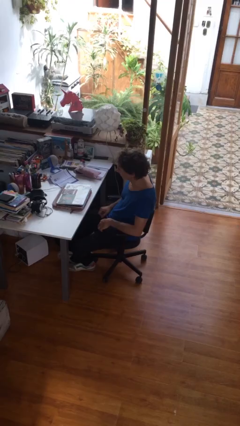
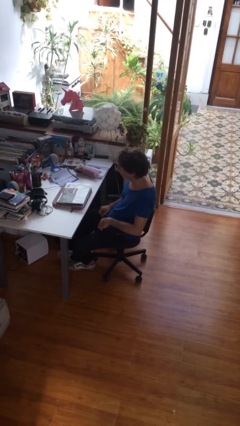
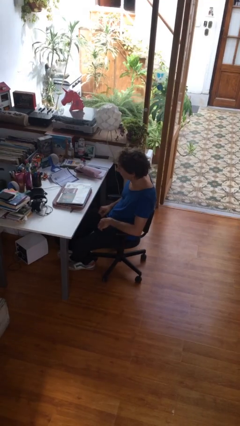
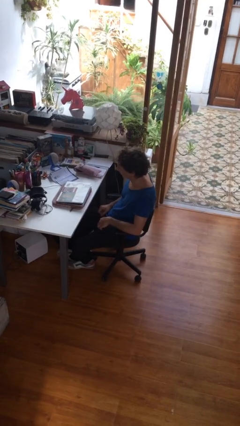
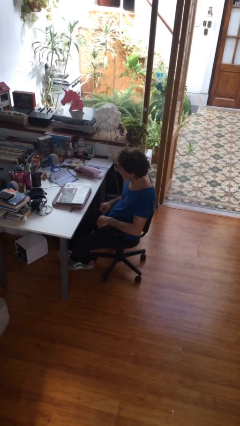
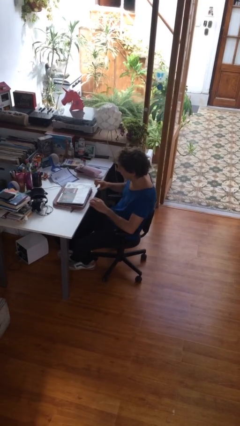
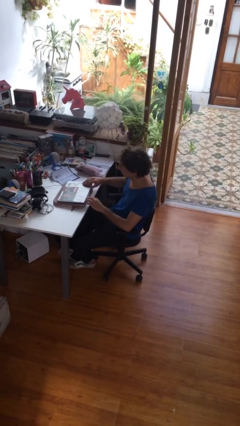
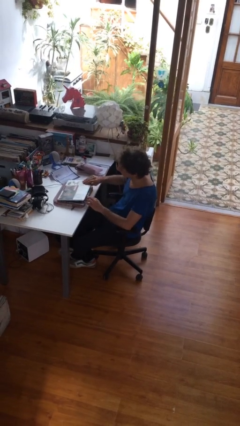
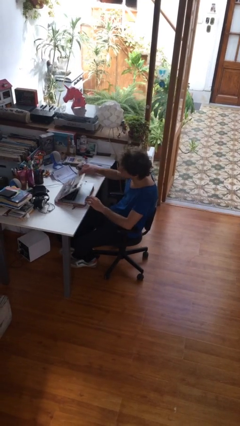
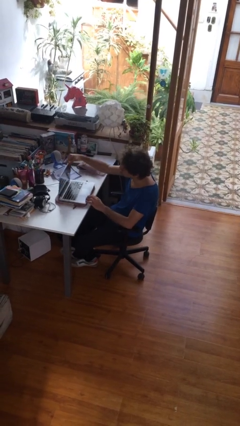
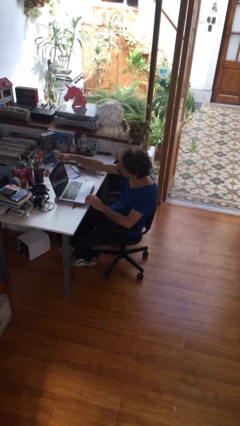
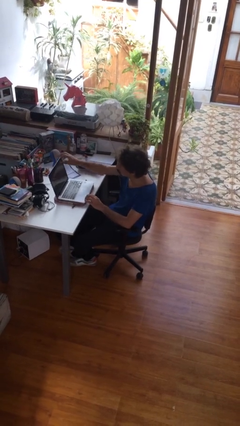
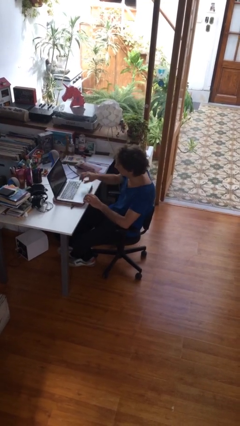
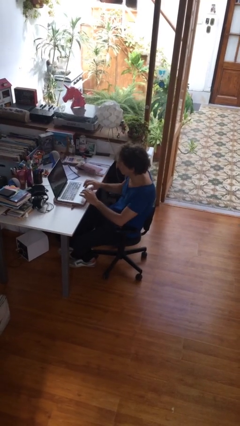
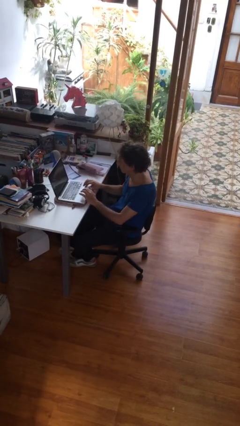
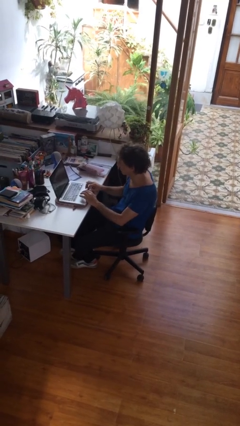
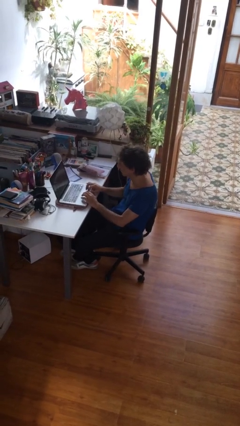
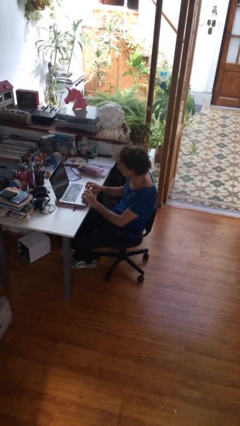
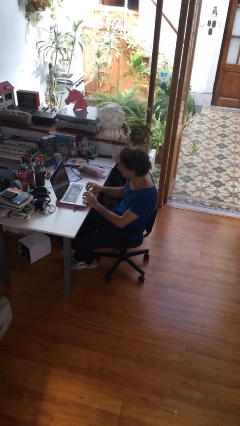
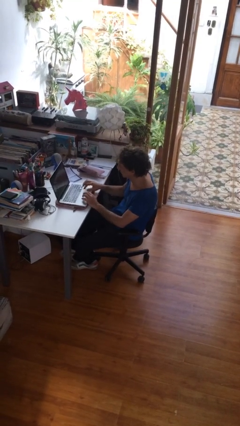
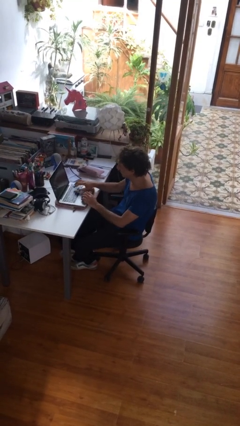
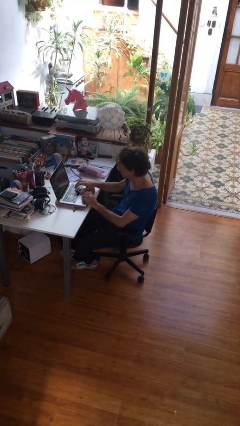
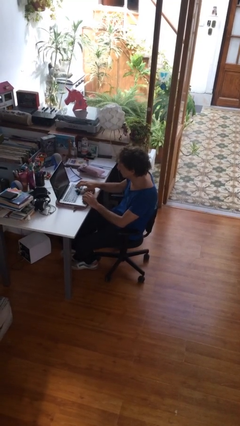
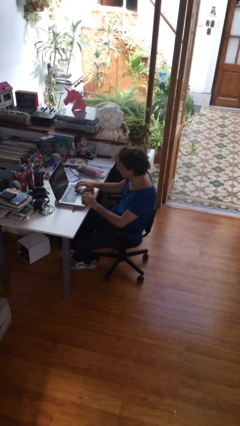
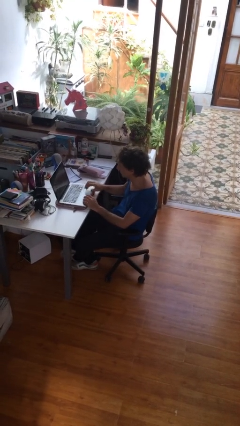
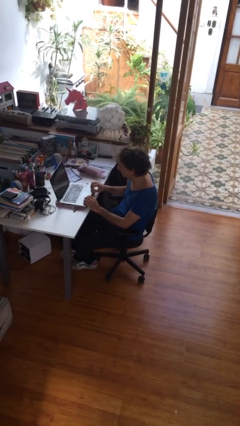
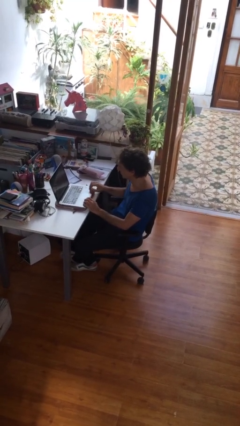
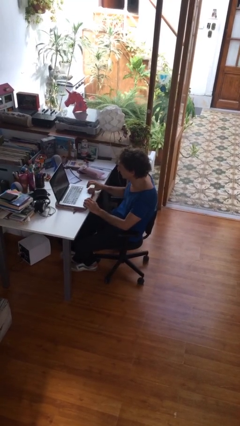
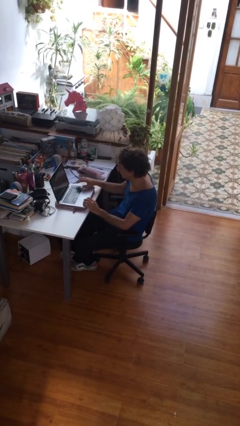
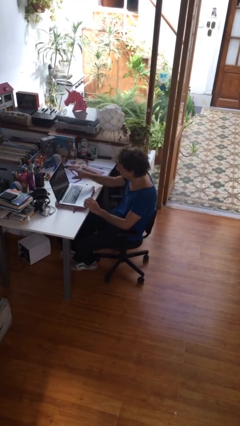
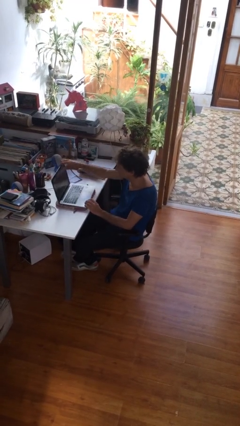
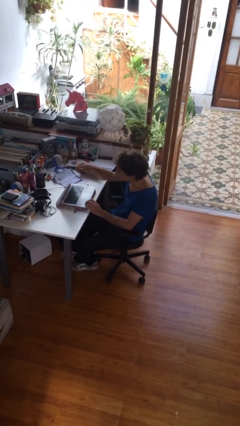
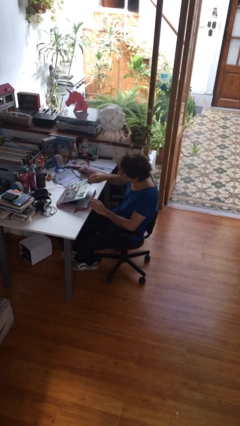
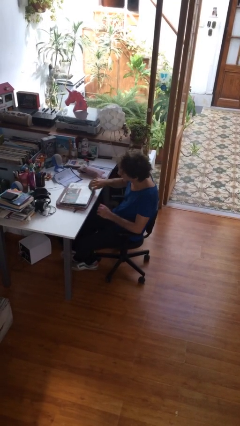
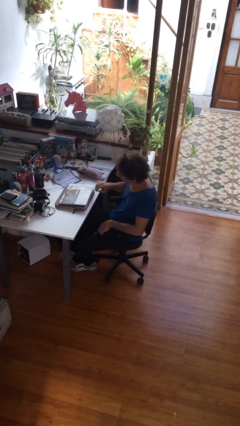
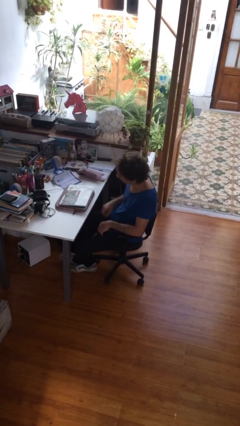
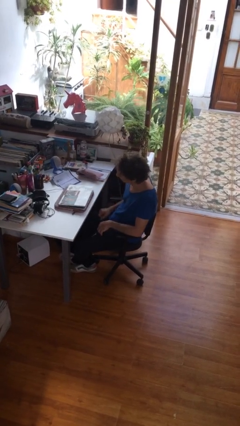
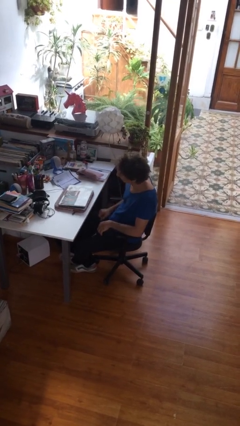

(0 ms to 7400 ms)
person interacts with laptop

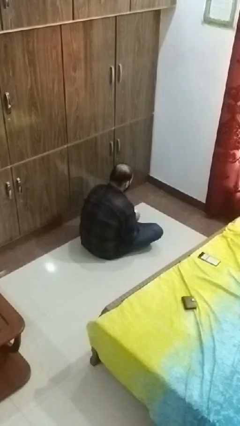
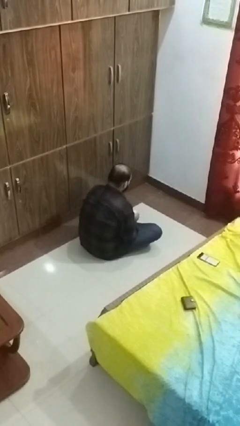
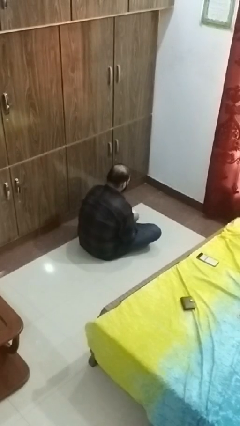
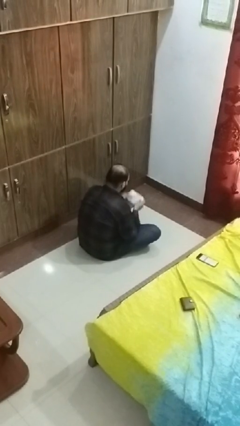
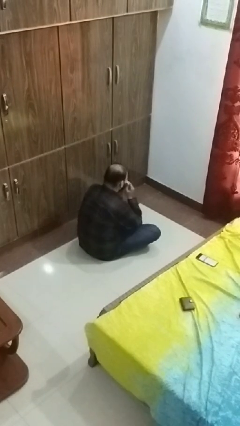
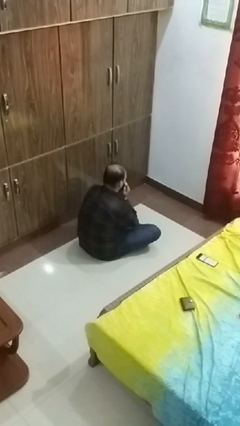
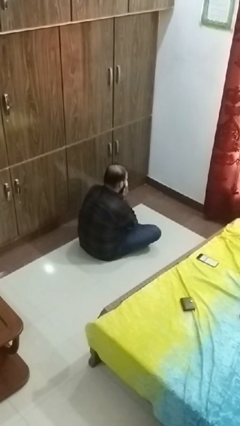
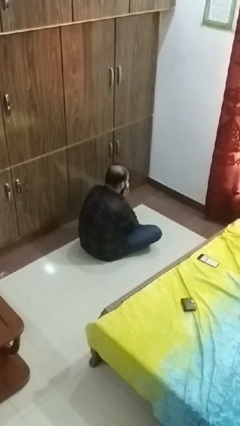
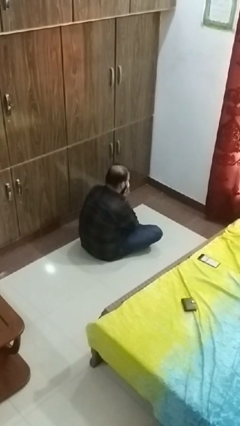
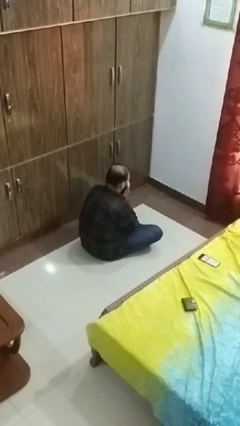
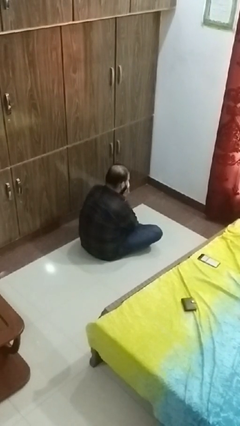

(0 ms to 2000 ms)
person blows nose

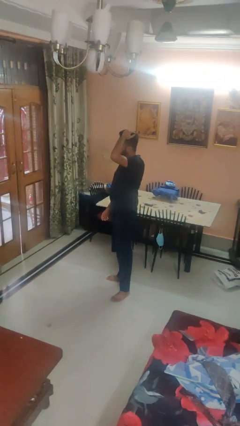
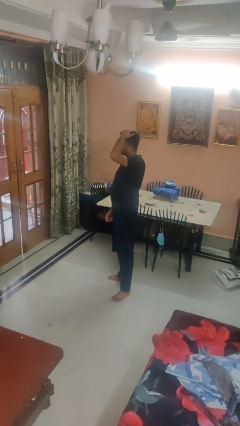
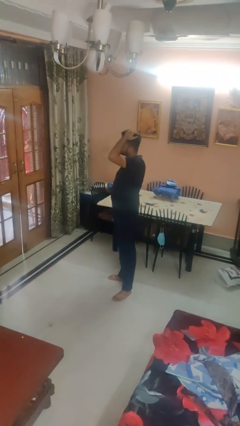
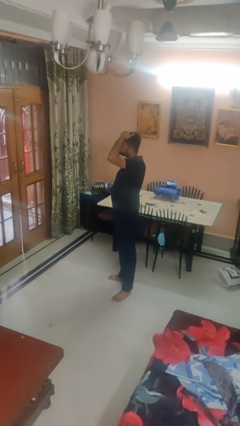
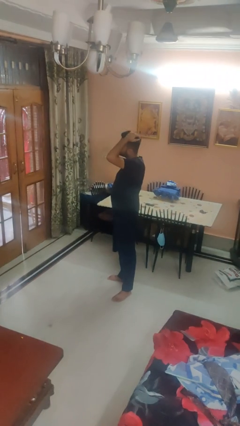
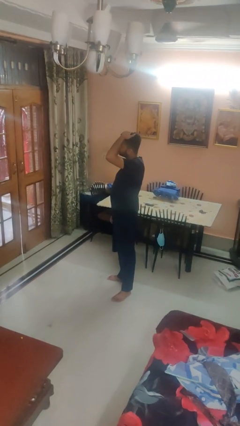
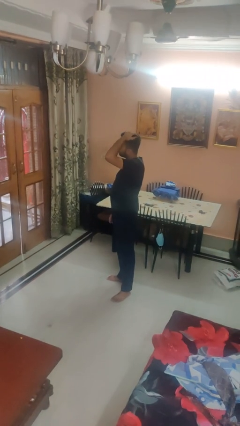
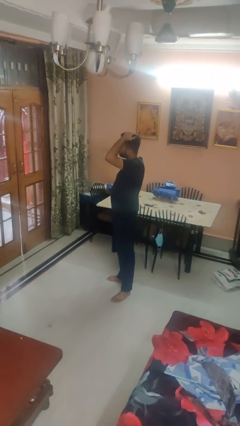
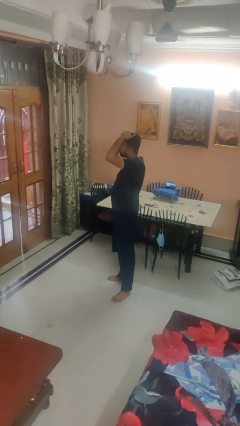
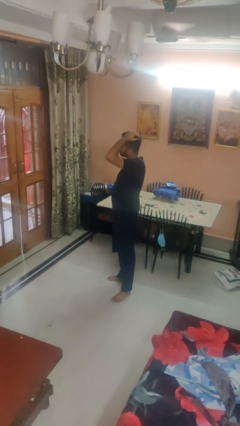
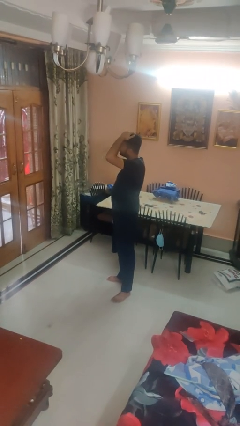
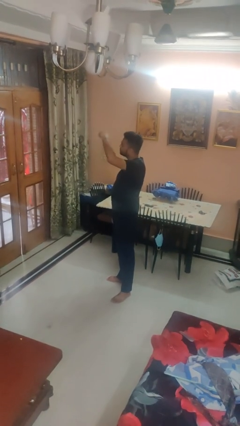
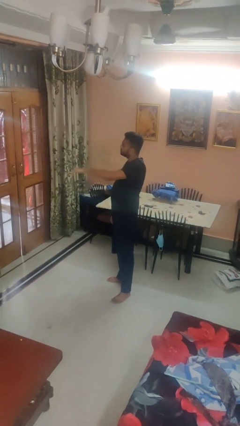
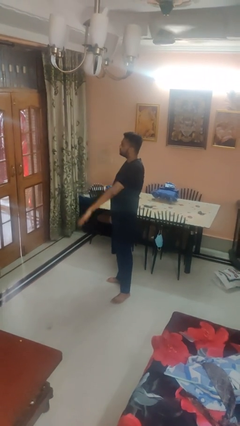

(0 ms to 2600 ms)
person pats head

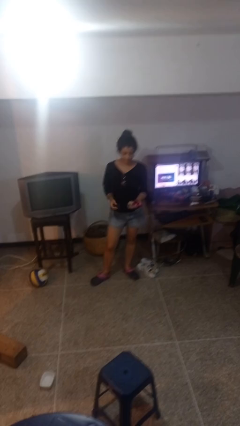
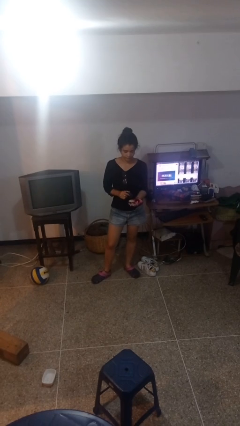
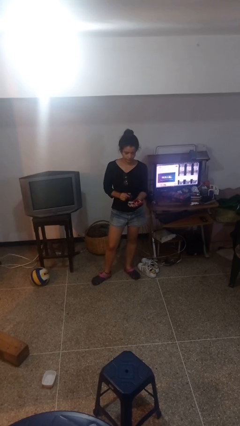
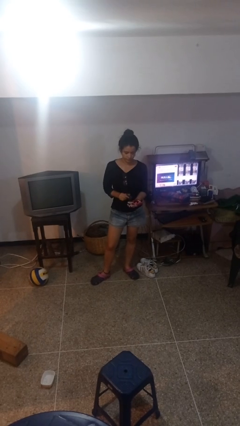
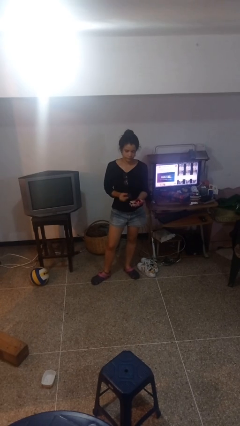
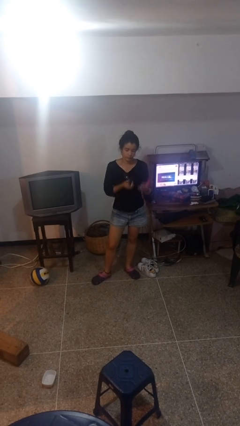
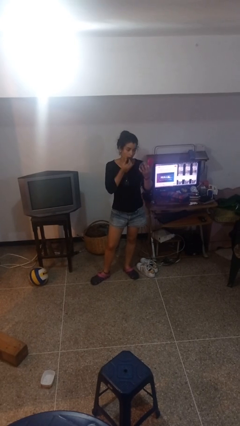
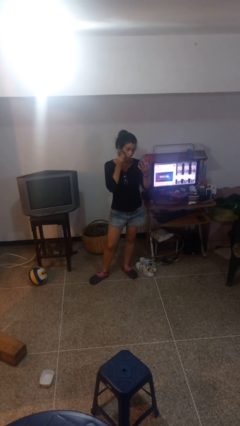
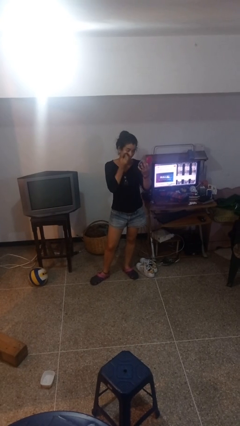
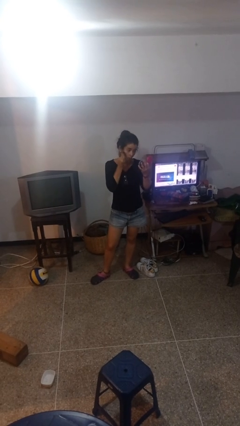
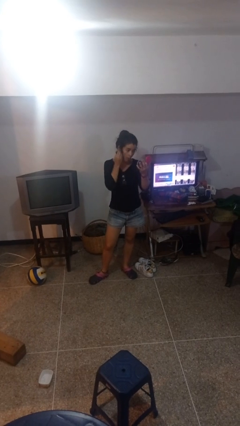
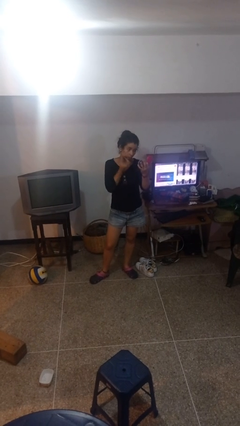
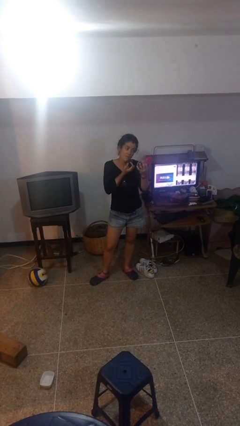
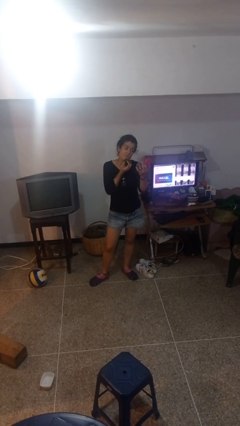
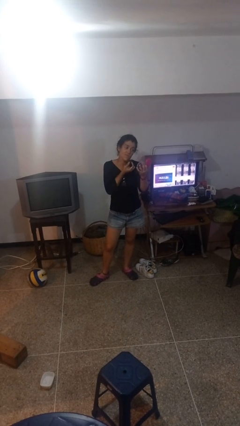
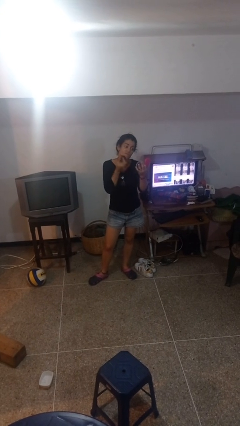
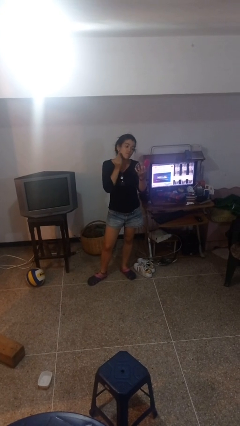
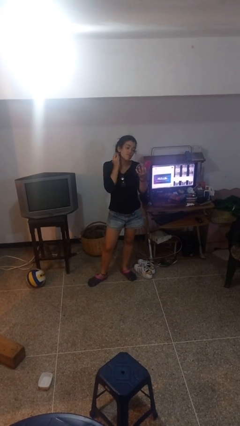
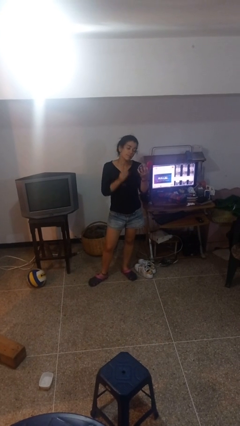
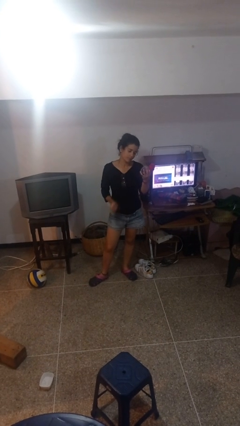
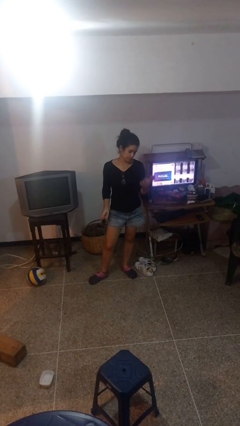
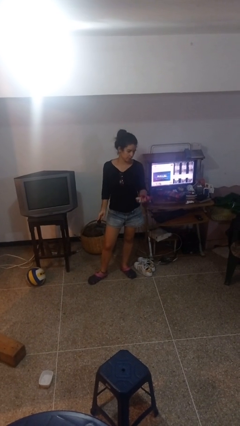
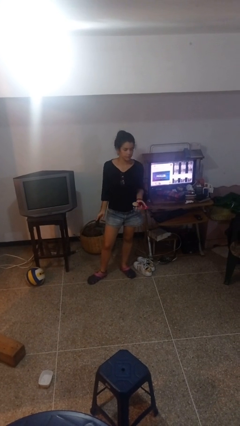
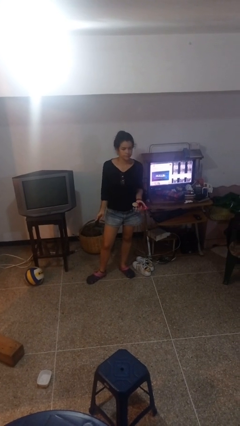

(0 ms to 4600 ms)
person applies foundation makeup

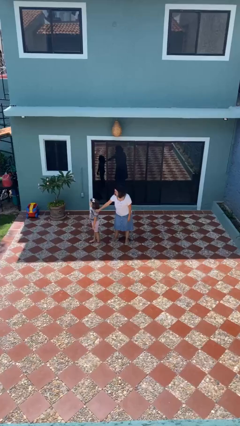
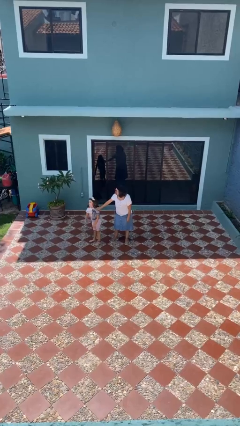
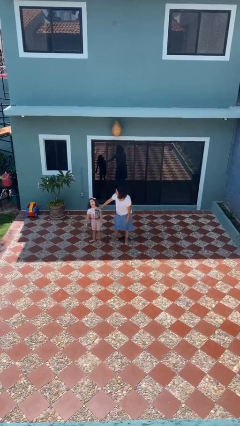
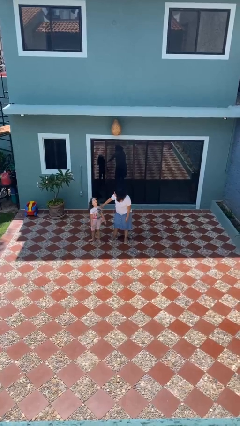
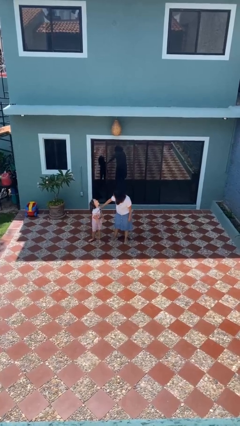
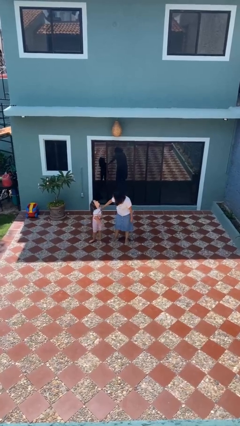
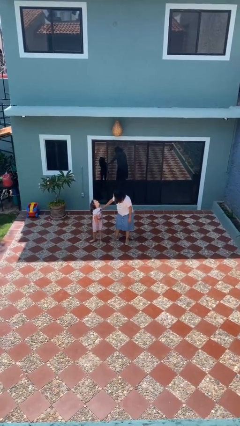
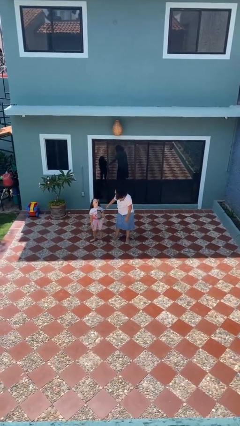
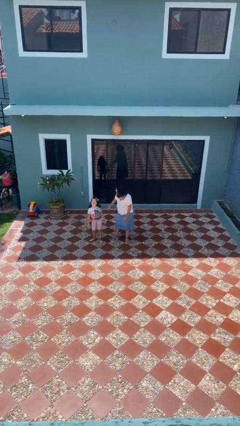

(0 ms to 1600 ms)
person spins person around
